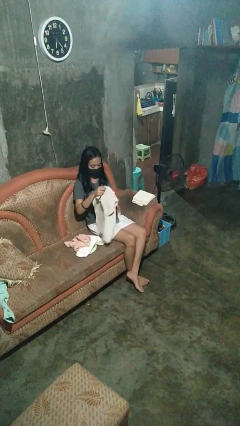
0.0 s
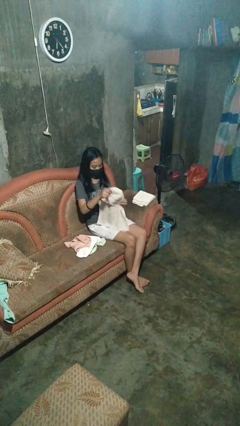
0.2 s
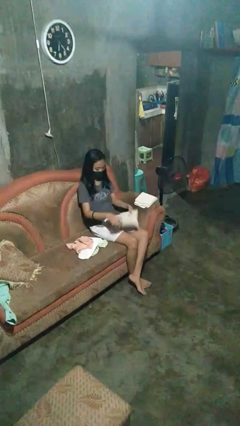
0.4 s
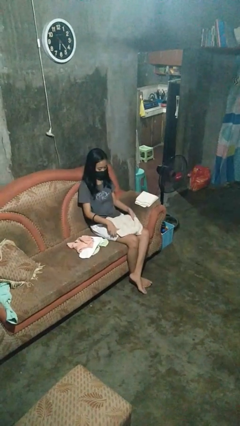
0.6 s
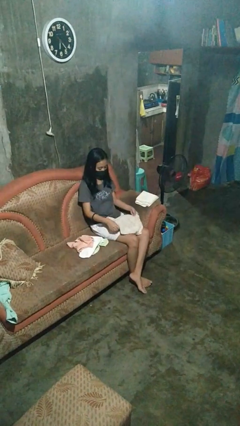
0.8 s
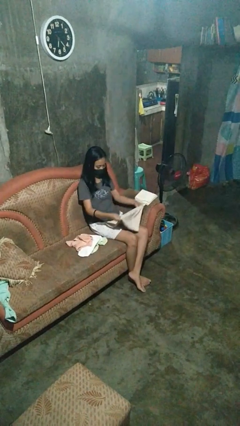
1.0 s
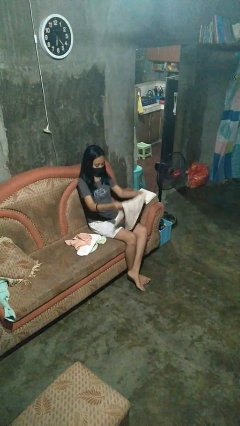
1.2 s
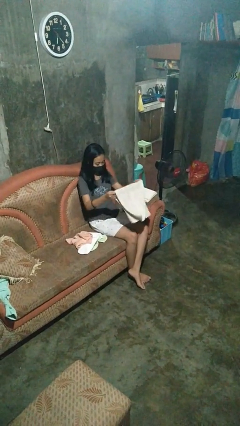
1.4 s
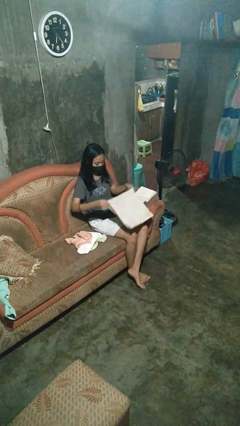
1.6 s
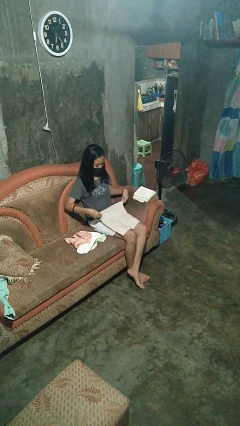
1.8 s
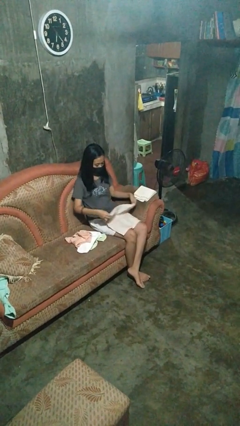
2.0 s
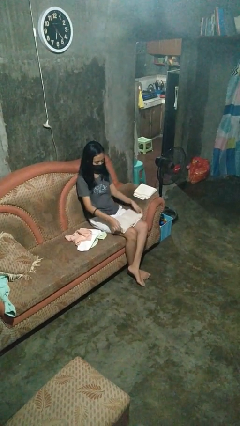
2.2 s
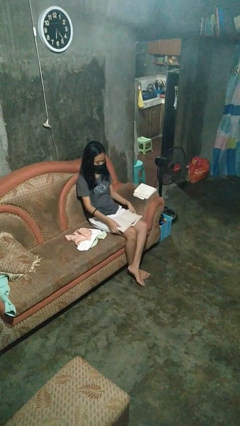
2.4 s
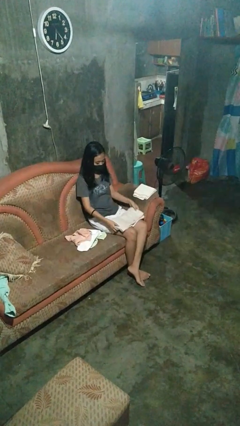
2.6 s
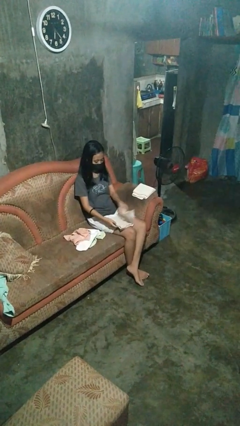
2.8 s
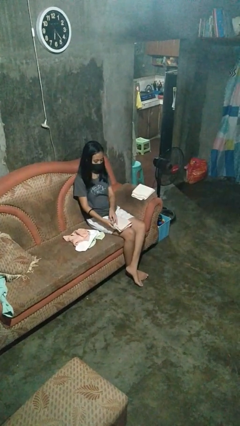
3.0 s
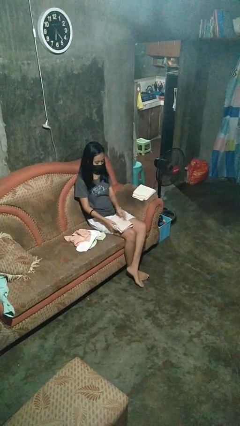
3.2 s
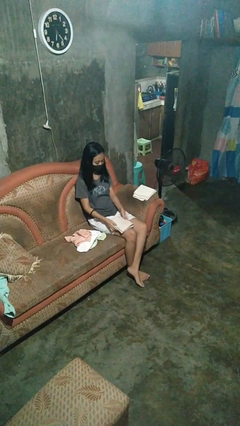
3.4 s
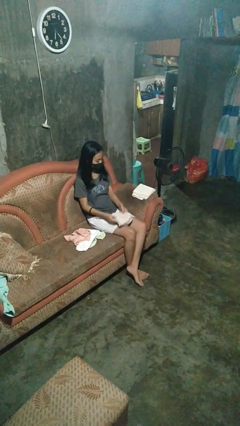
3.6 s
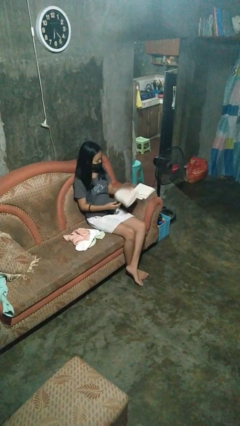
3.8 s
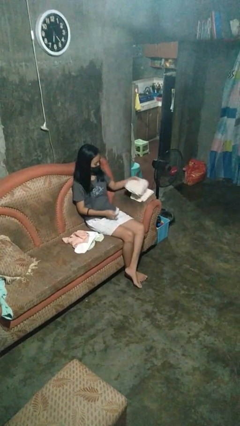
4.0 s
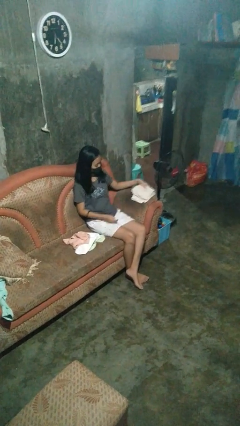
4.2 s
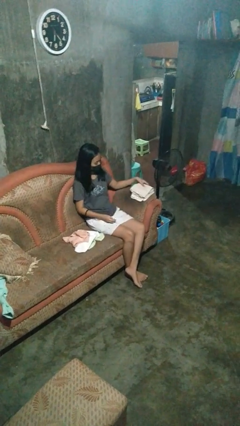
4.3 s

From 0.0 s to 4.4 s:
person folds towel

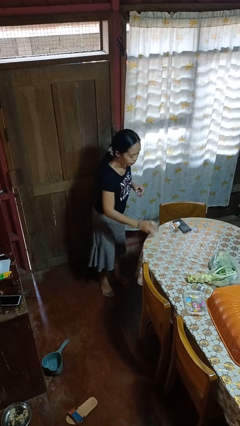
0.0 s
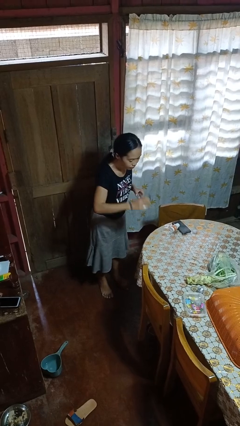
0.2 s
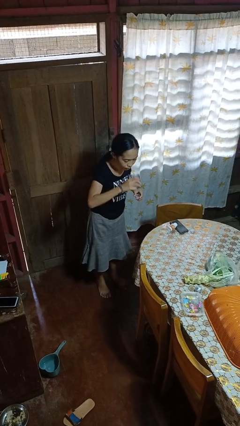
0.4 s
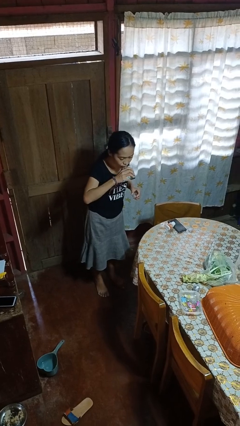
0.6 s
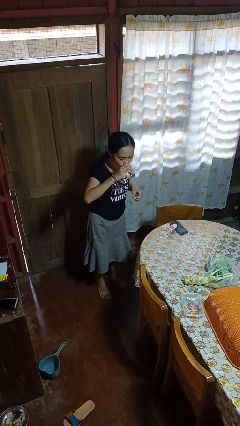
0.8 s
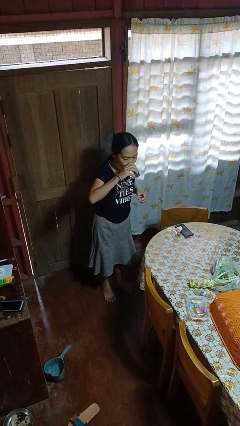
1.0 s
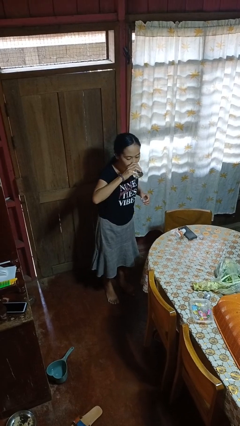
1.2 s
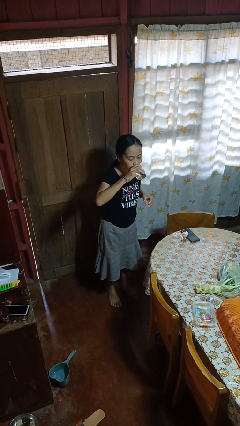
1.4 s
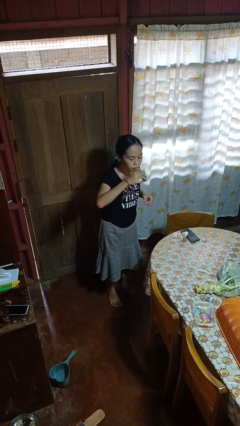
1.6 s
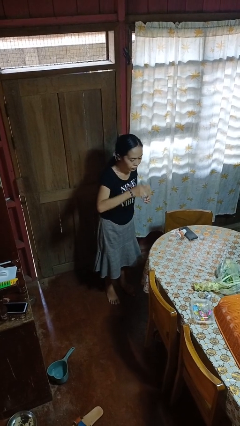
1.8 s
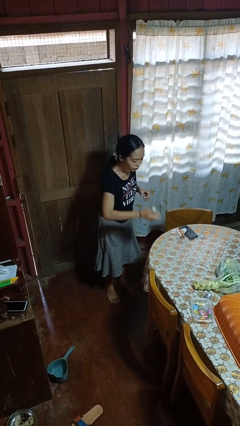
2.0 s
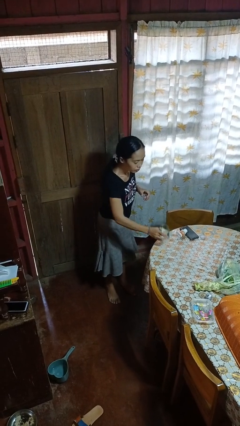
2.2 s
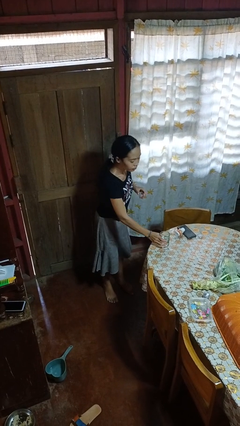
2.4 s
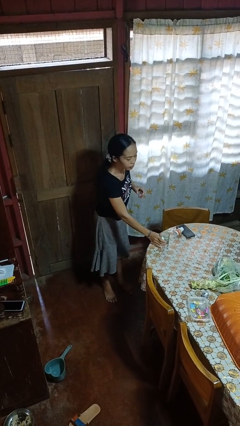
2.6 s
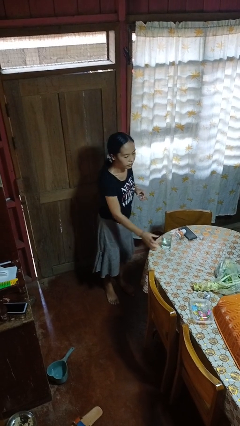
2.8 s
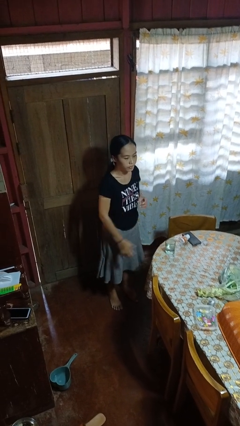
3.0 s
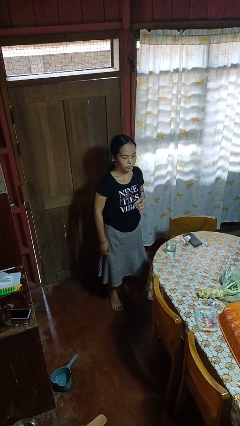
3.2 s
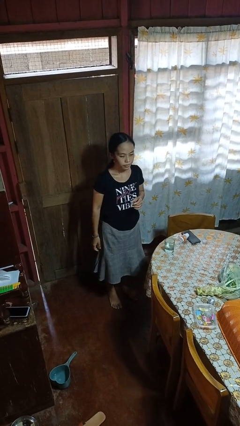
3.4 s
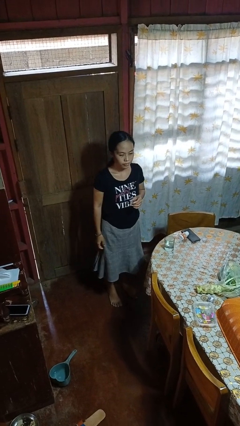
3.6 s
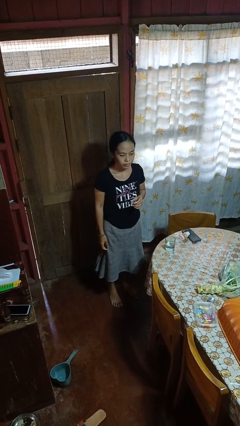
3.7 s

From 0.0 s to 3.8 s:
person drinks from cup

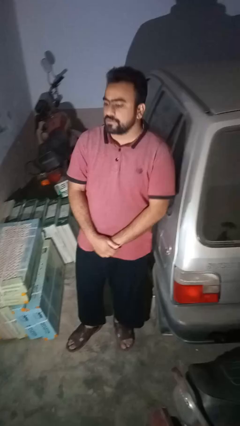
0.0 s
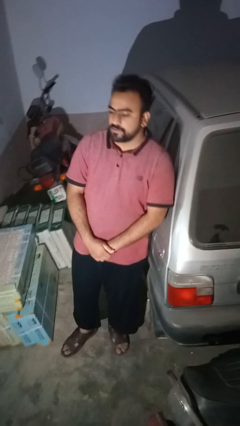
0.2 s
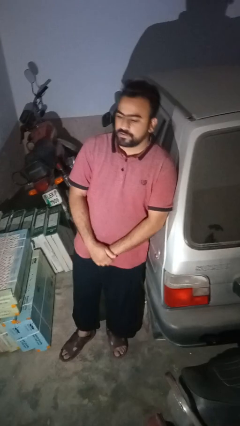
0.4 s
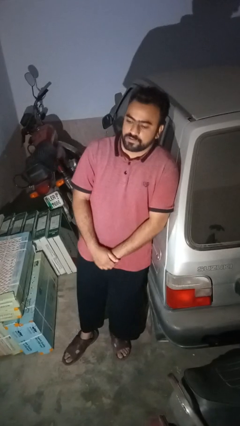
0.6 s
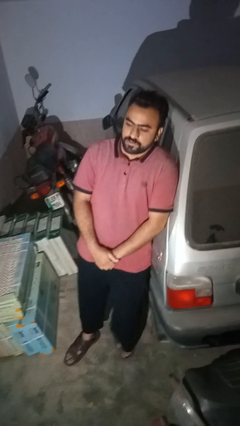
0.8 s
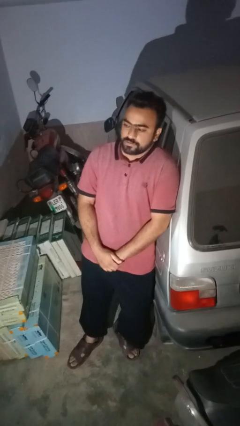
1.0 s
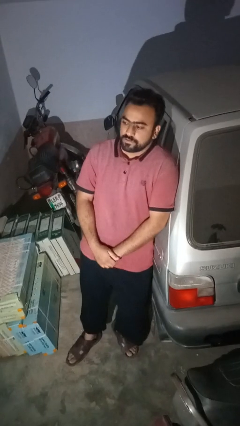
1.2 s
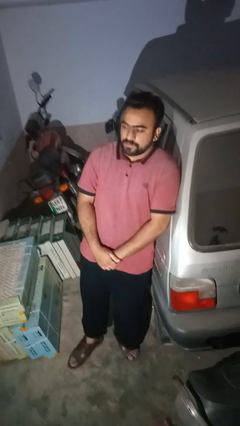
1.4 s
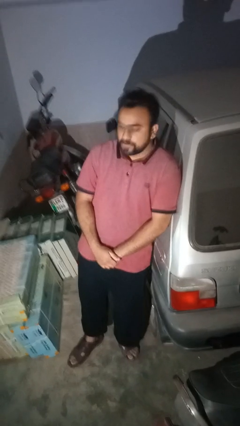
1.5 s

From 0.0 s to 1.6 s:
person leans against car

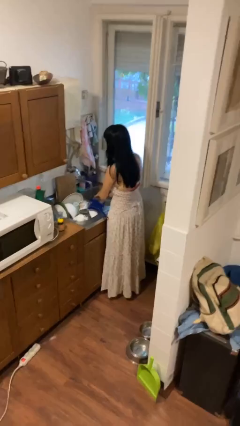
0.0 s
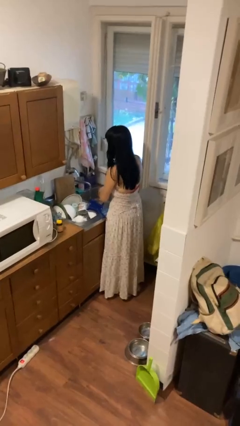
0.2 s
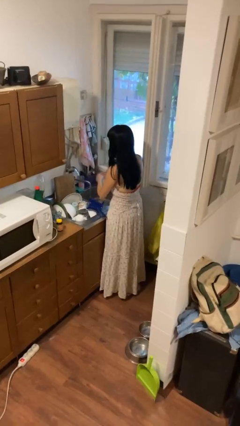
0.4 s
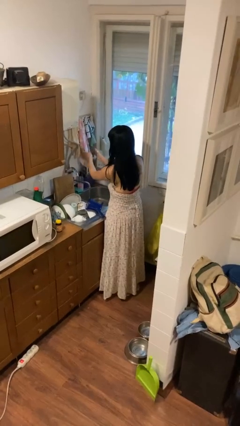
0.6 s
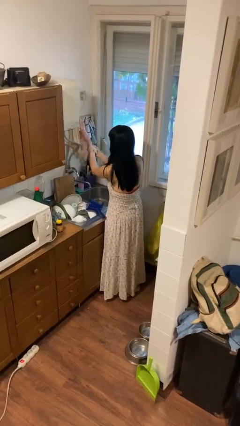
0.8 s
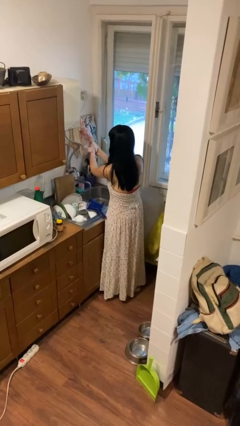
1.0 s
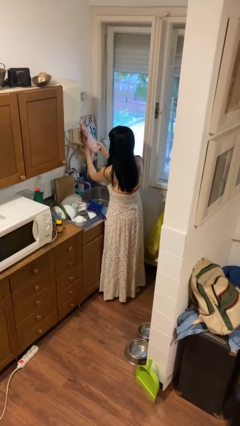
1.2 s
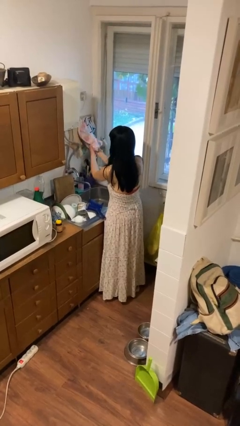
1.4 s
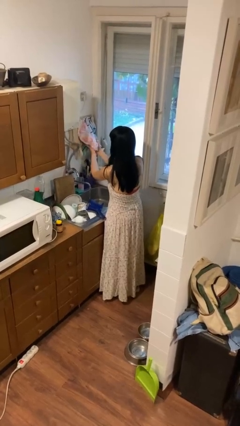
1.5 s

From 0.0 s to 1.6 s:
person dries hands with towel

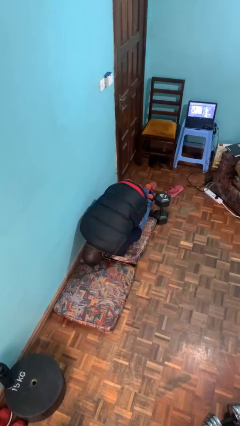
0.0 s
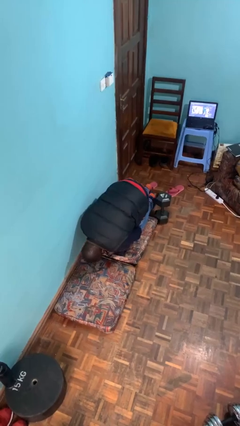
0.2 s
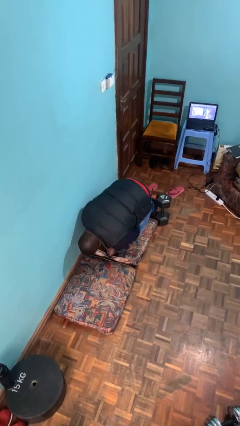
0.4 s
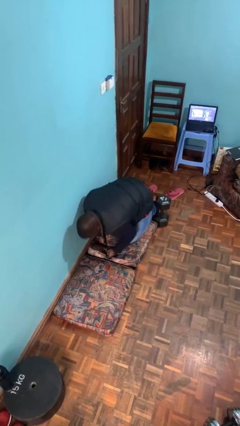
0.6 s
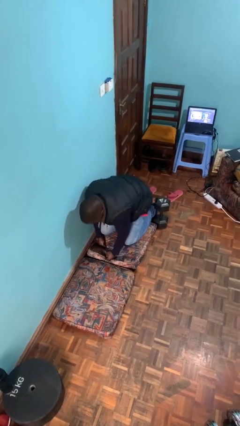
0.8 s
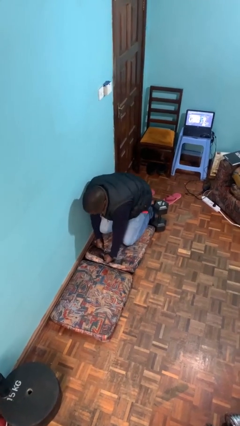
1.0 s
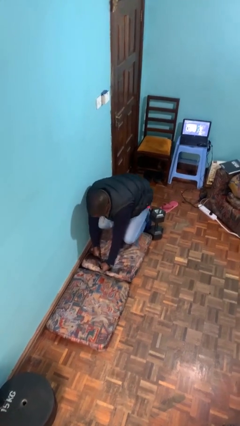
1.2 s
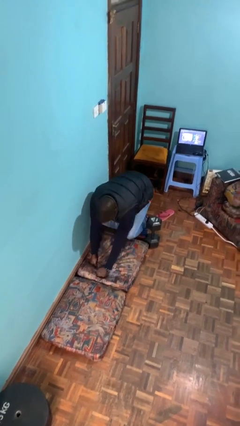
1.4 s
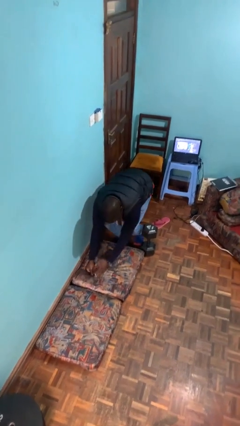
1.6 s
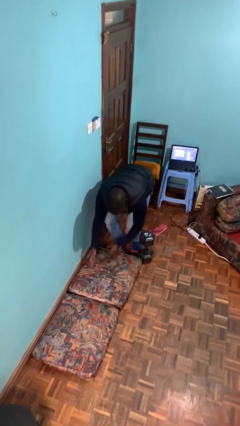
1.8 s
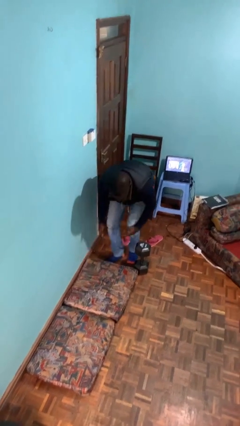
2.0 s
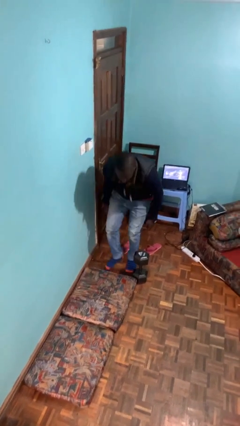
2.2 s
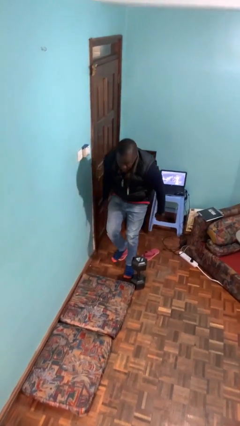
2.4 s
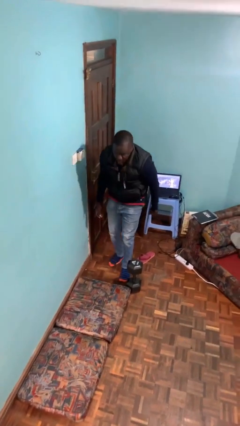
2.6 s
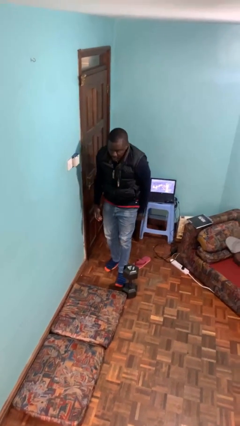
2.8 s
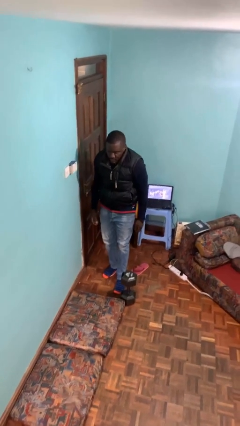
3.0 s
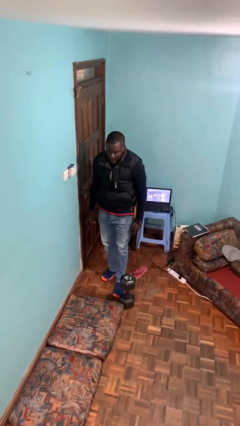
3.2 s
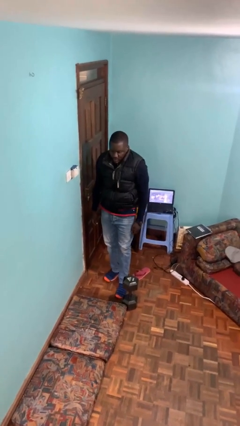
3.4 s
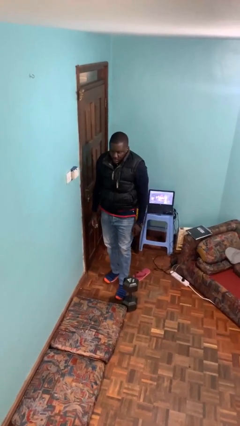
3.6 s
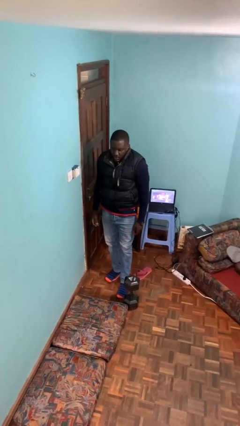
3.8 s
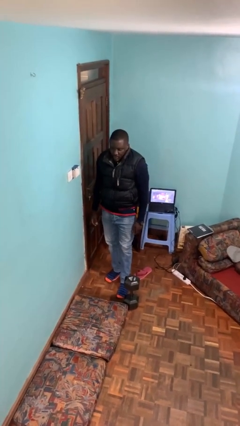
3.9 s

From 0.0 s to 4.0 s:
person stands up from floor

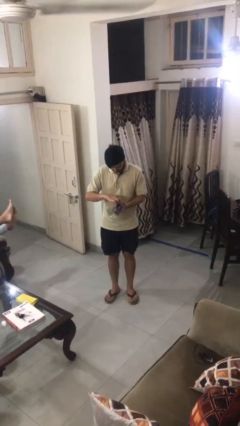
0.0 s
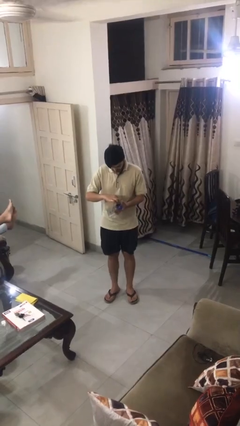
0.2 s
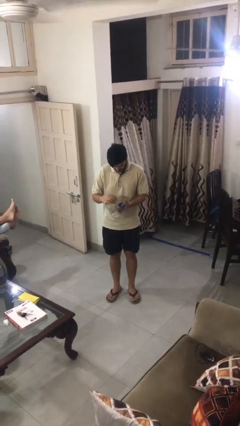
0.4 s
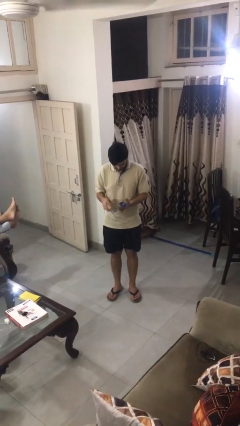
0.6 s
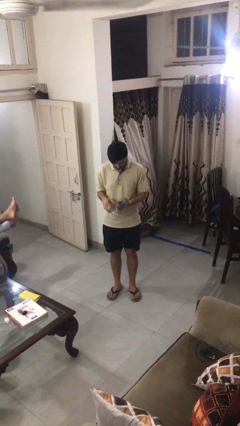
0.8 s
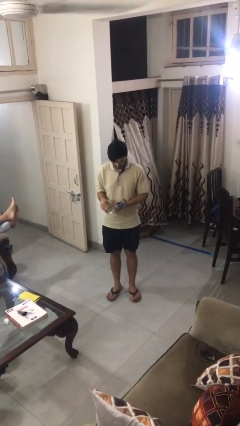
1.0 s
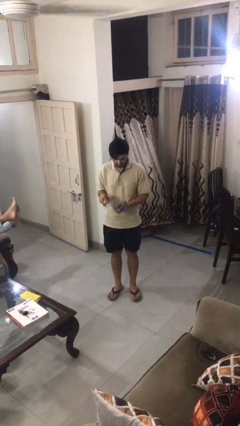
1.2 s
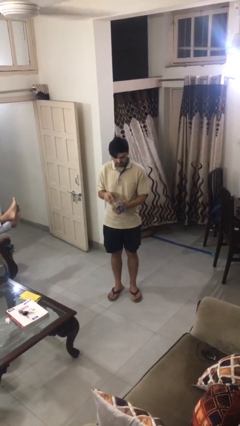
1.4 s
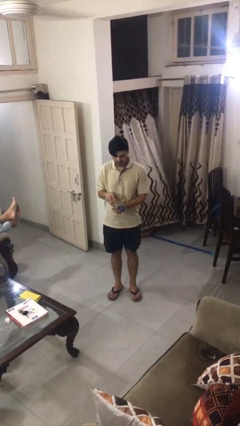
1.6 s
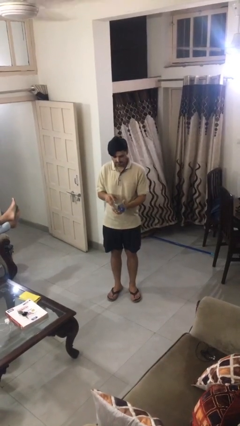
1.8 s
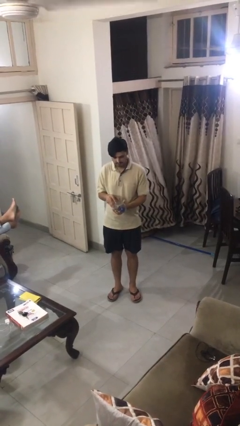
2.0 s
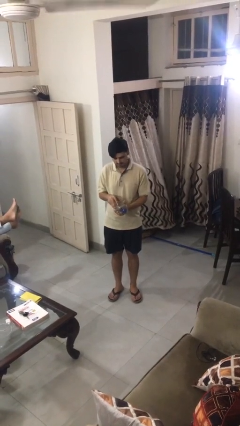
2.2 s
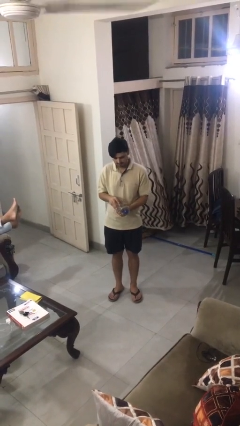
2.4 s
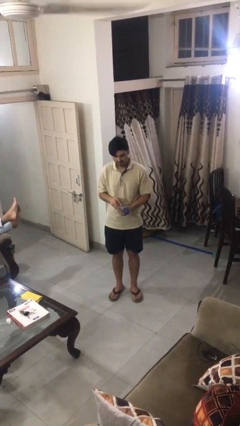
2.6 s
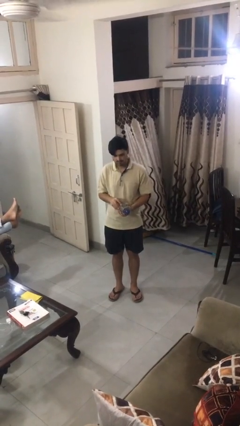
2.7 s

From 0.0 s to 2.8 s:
person closes jewelry box
